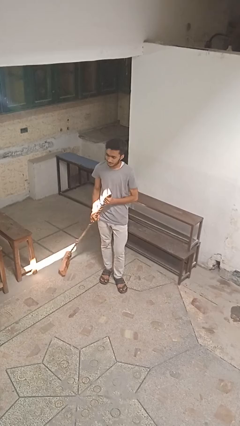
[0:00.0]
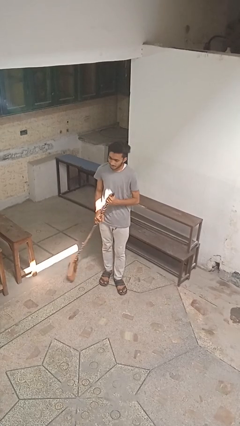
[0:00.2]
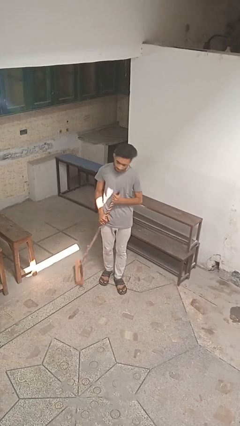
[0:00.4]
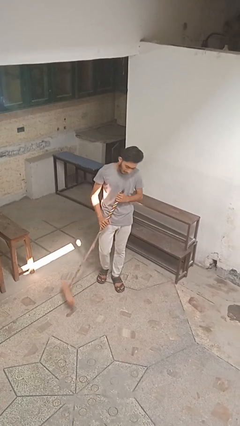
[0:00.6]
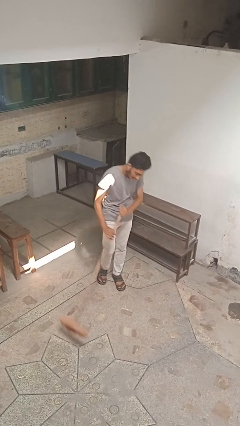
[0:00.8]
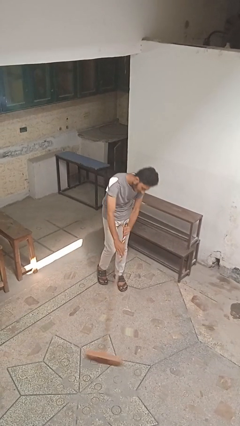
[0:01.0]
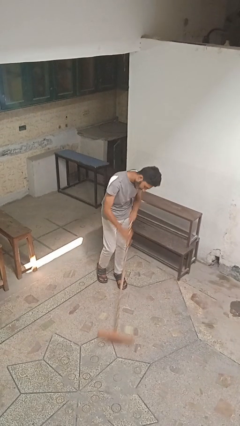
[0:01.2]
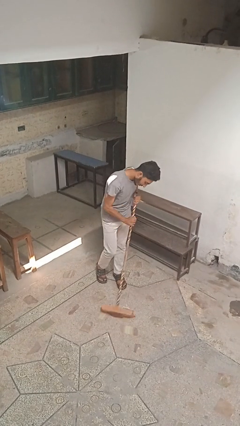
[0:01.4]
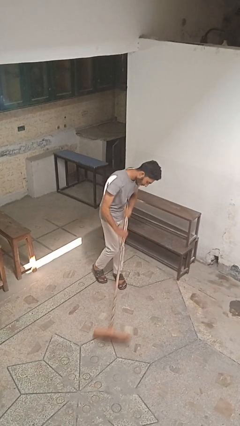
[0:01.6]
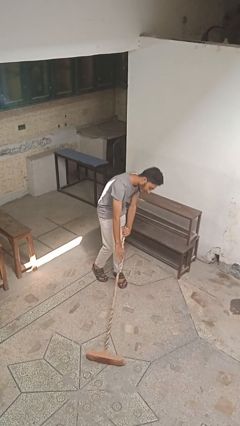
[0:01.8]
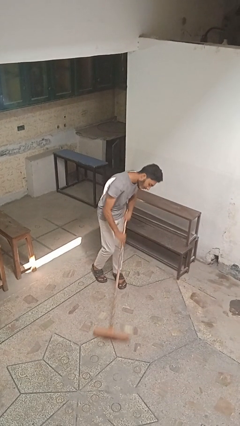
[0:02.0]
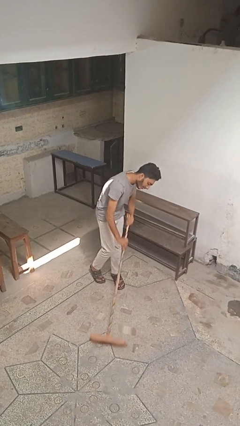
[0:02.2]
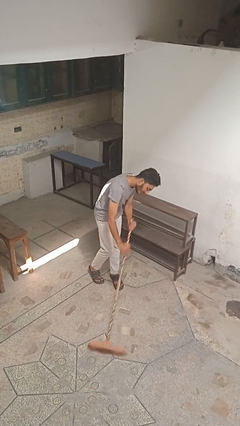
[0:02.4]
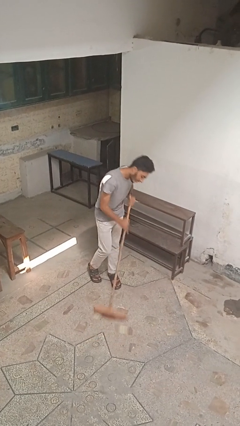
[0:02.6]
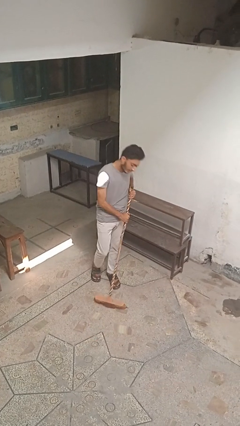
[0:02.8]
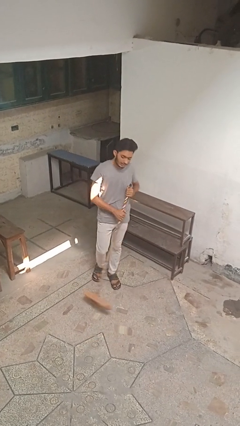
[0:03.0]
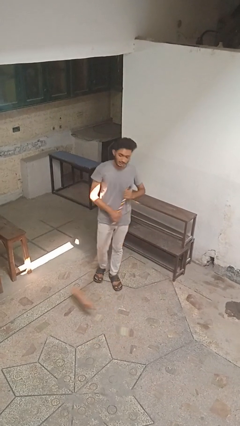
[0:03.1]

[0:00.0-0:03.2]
person sweeps floor

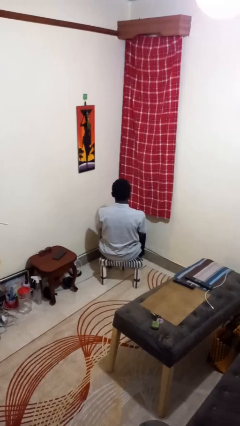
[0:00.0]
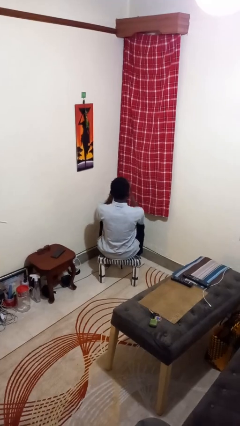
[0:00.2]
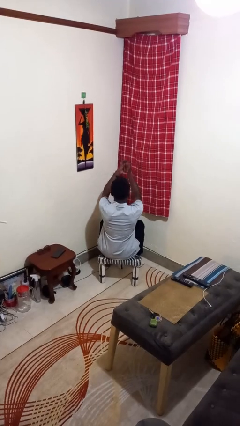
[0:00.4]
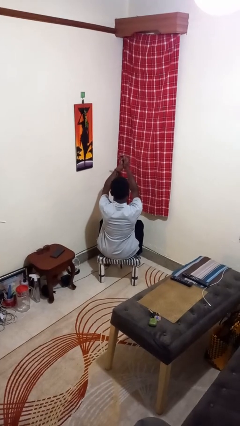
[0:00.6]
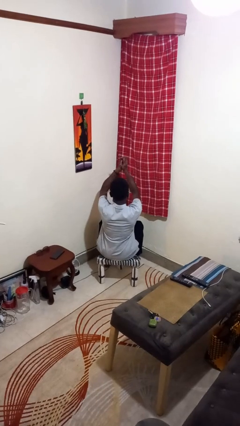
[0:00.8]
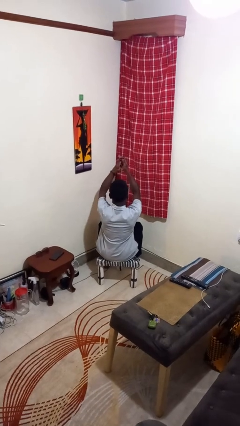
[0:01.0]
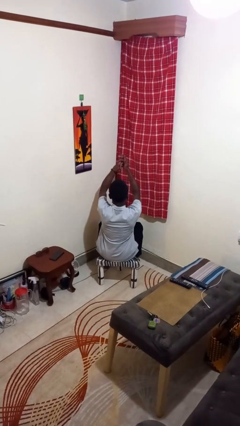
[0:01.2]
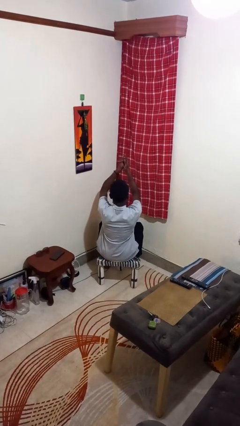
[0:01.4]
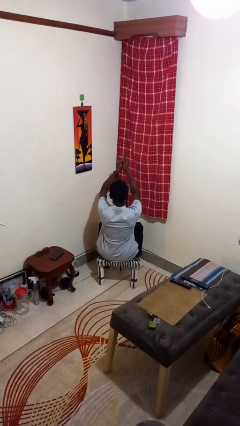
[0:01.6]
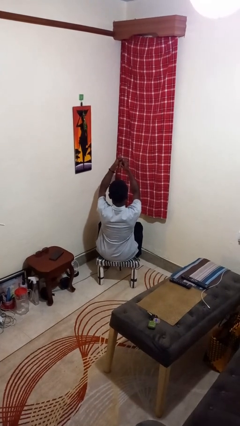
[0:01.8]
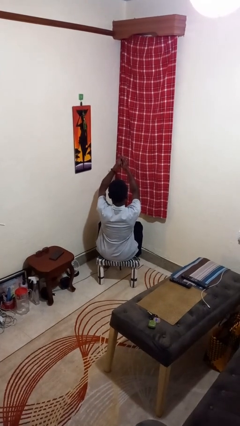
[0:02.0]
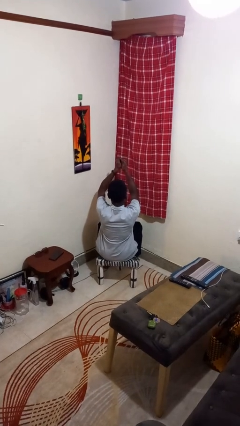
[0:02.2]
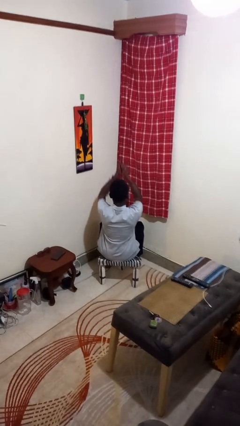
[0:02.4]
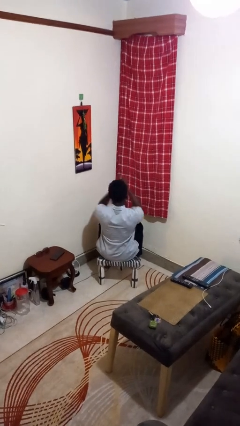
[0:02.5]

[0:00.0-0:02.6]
person cracks knuckles

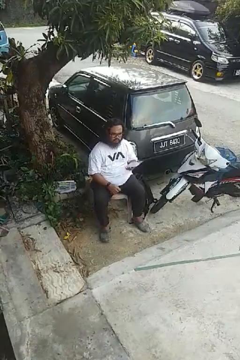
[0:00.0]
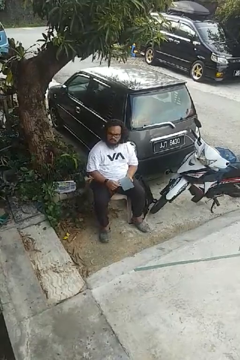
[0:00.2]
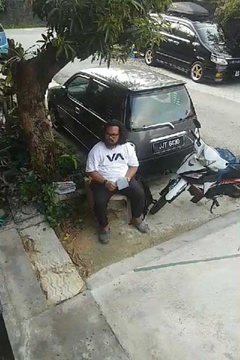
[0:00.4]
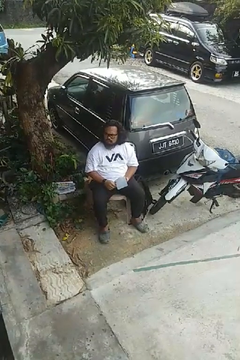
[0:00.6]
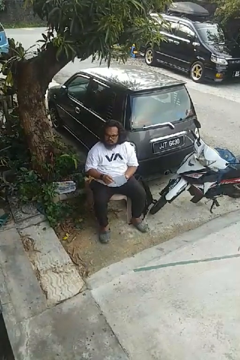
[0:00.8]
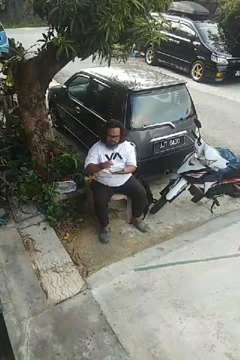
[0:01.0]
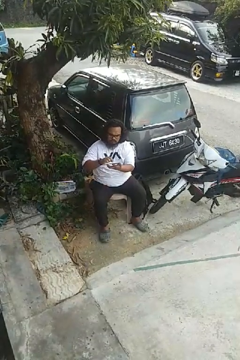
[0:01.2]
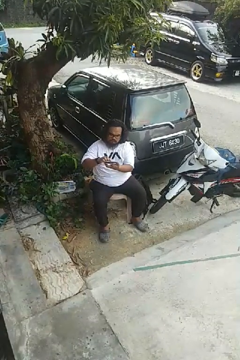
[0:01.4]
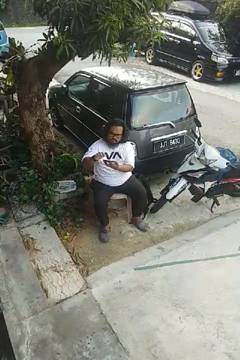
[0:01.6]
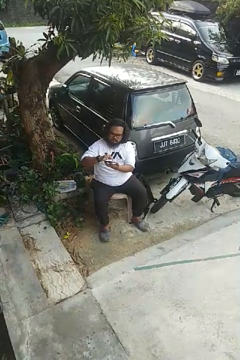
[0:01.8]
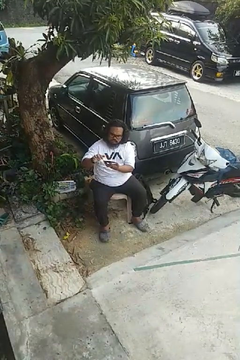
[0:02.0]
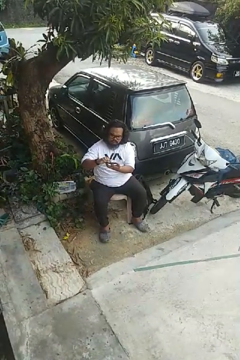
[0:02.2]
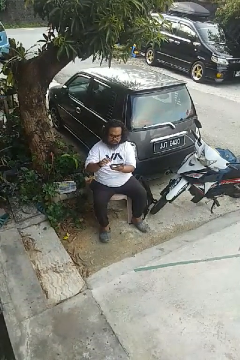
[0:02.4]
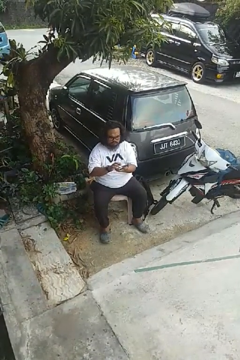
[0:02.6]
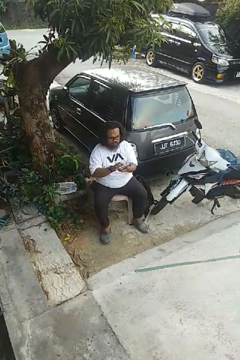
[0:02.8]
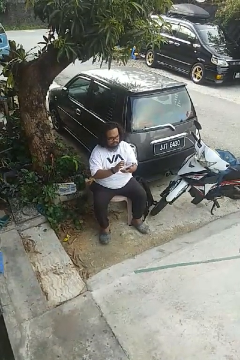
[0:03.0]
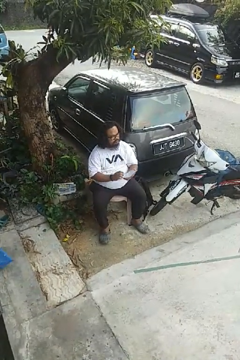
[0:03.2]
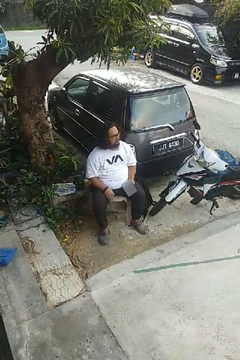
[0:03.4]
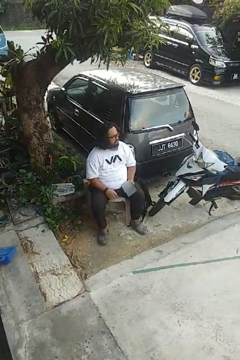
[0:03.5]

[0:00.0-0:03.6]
person interacts with tablet

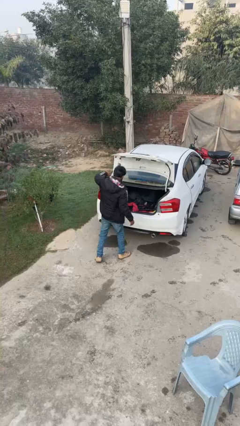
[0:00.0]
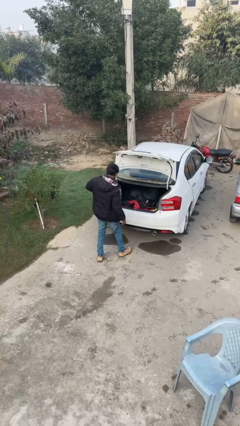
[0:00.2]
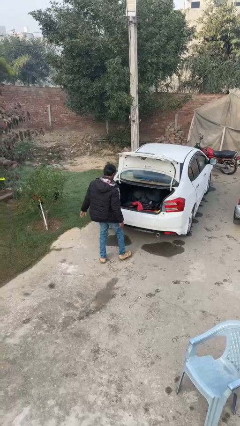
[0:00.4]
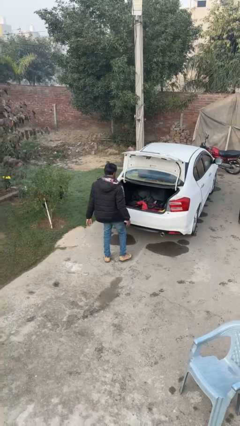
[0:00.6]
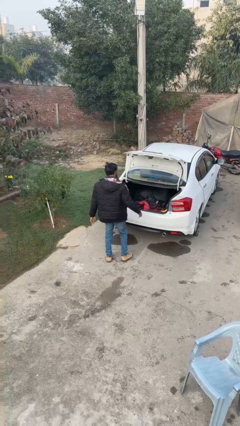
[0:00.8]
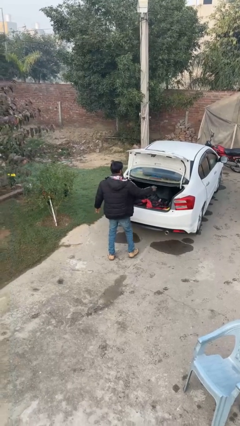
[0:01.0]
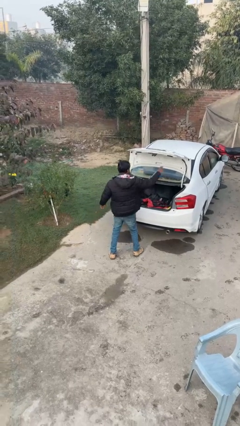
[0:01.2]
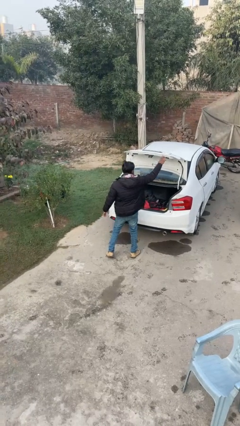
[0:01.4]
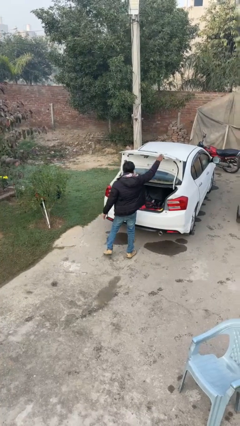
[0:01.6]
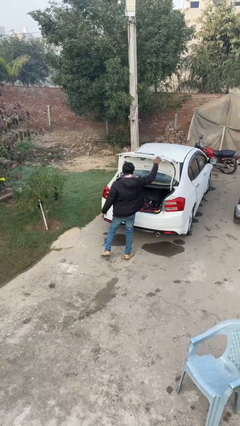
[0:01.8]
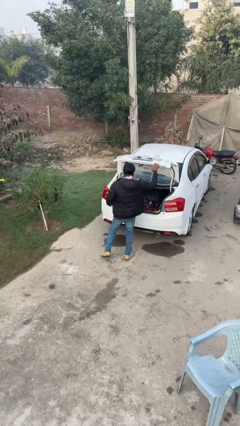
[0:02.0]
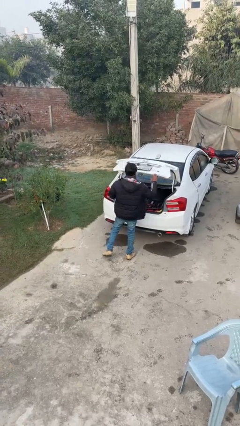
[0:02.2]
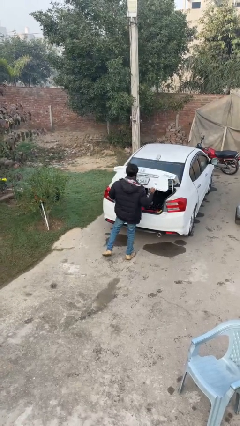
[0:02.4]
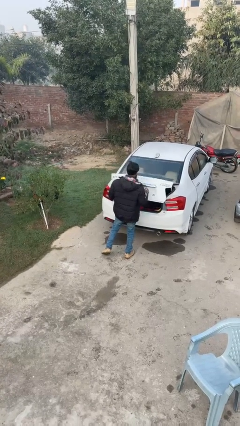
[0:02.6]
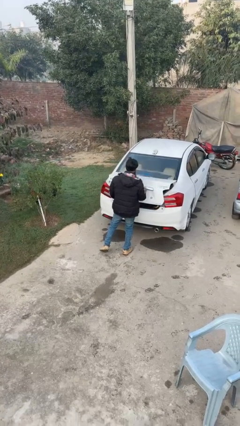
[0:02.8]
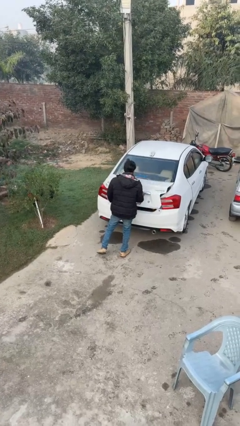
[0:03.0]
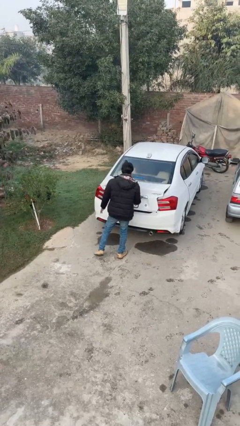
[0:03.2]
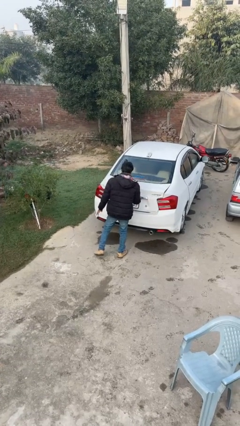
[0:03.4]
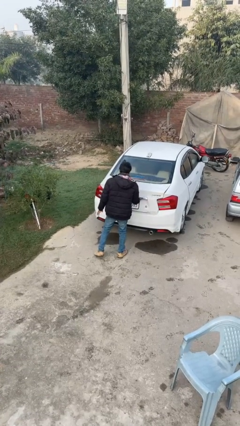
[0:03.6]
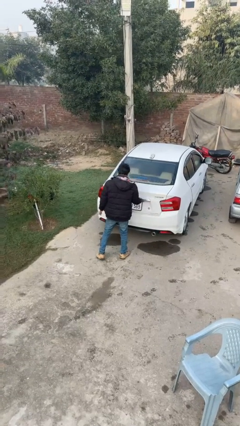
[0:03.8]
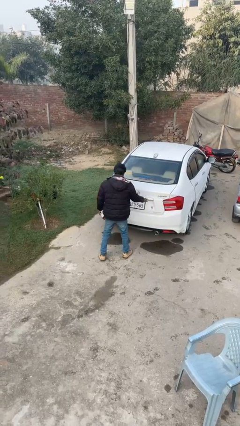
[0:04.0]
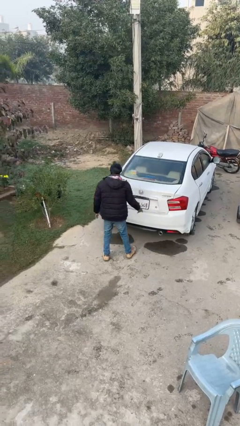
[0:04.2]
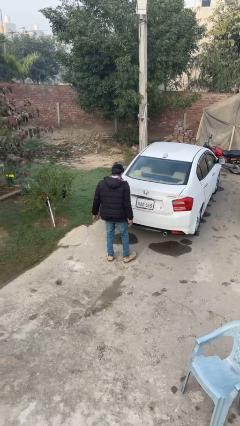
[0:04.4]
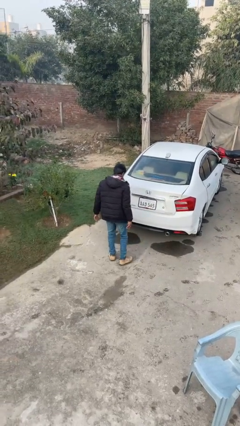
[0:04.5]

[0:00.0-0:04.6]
person closes car trunk

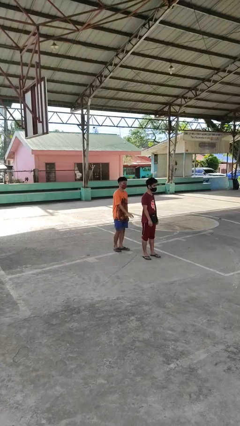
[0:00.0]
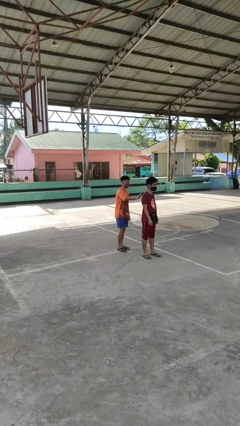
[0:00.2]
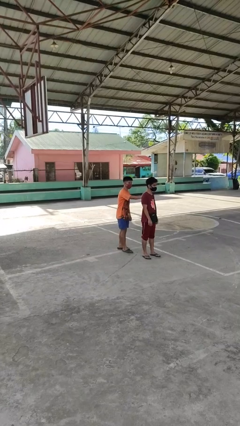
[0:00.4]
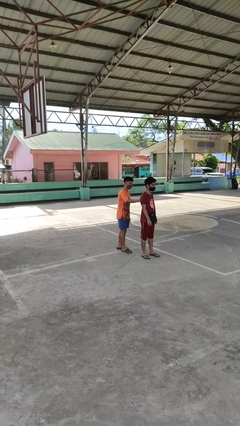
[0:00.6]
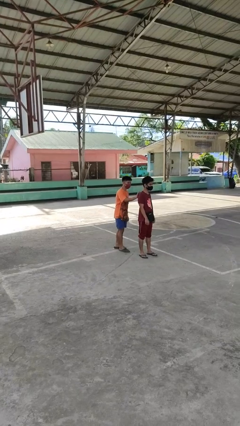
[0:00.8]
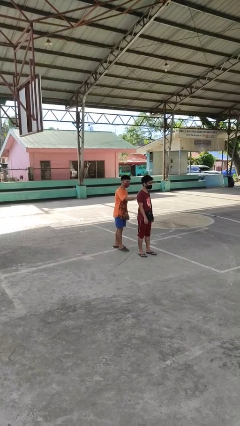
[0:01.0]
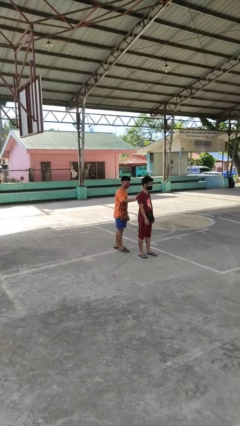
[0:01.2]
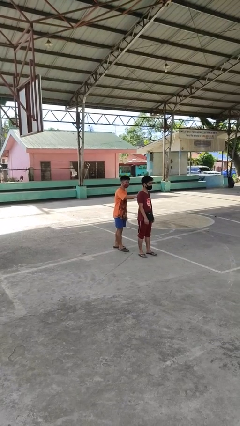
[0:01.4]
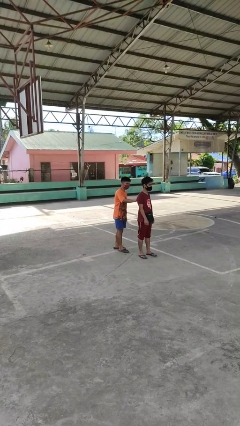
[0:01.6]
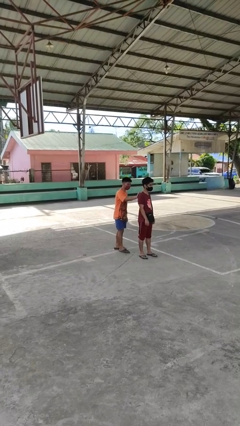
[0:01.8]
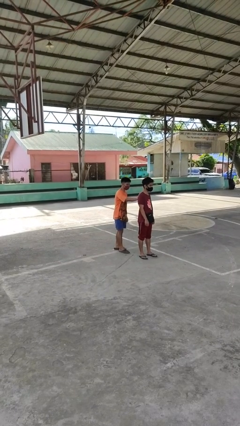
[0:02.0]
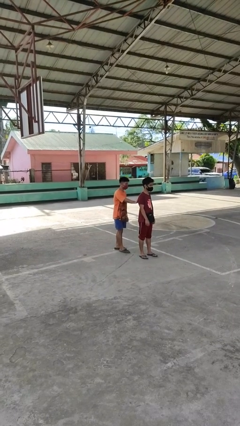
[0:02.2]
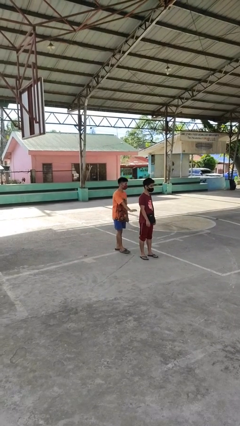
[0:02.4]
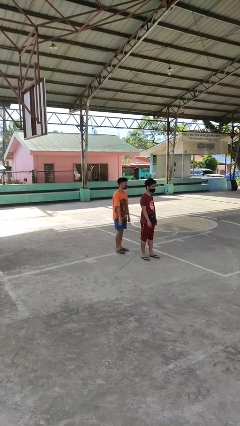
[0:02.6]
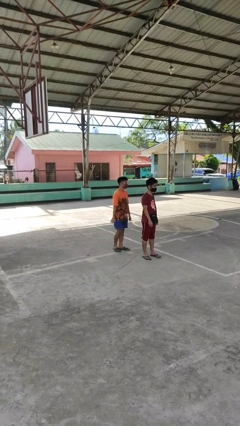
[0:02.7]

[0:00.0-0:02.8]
person touches back of person

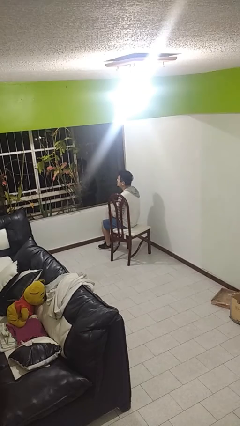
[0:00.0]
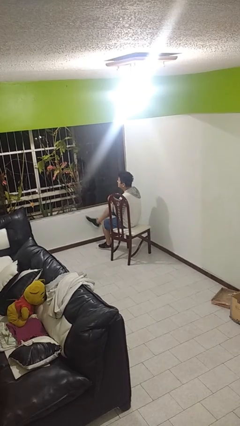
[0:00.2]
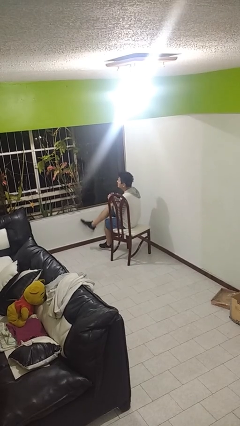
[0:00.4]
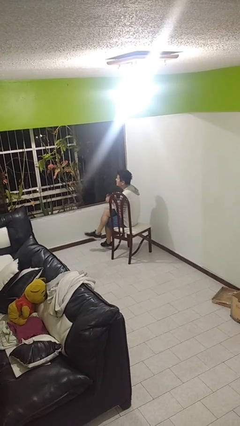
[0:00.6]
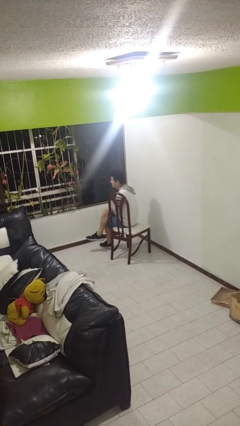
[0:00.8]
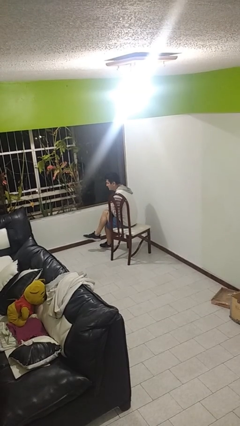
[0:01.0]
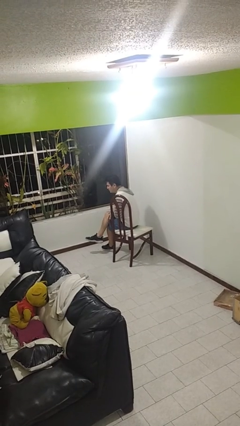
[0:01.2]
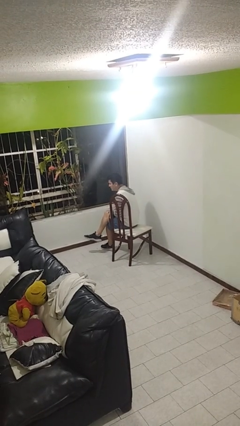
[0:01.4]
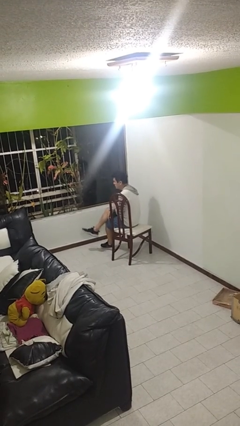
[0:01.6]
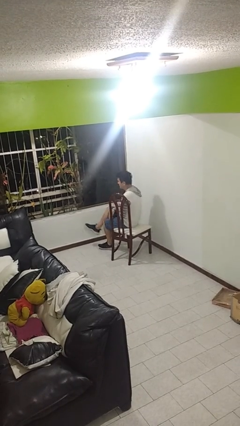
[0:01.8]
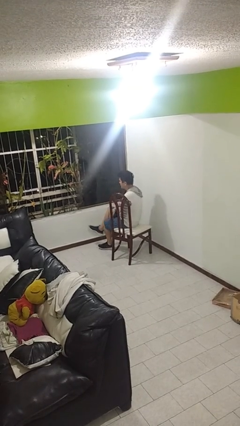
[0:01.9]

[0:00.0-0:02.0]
person crosses legs
